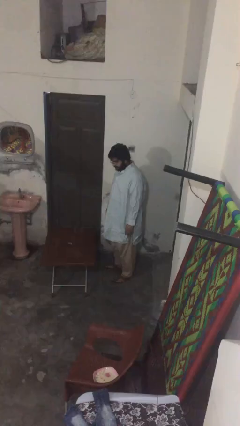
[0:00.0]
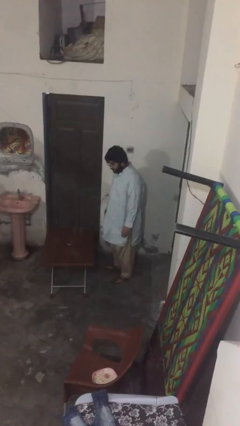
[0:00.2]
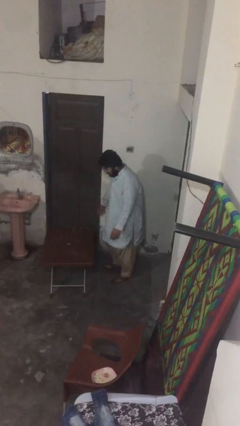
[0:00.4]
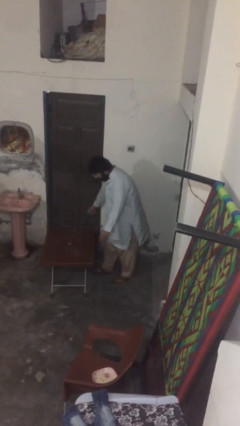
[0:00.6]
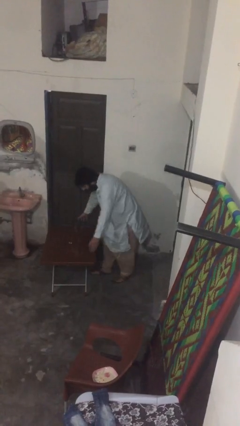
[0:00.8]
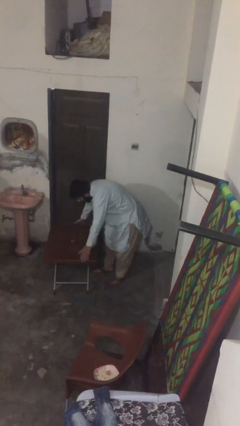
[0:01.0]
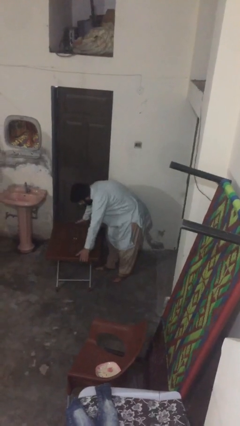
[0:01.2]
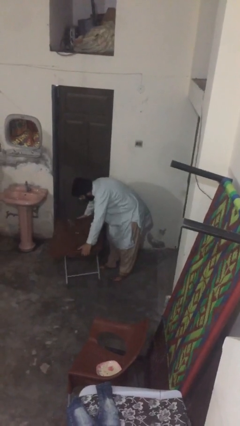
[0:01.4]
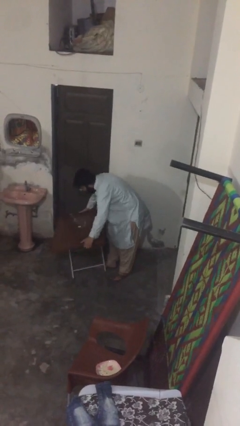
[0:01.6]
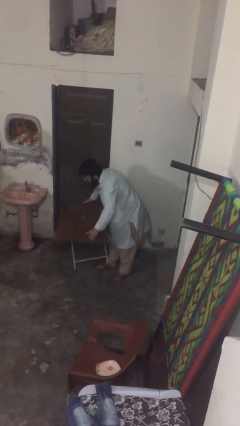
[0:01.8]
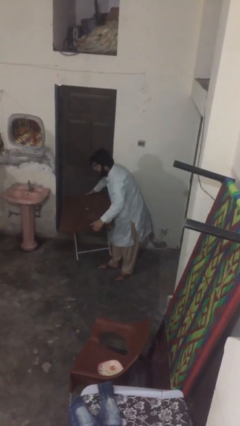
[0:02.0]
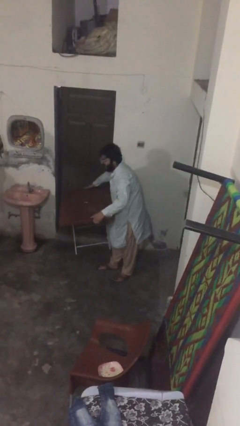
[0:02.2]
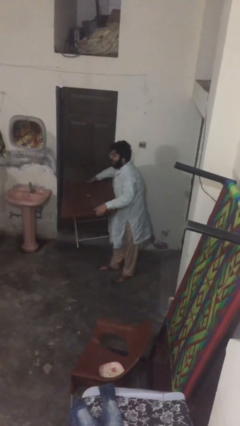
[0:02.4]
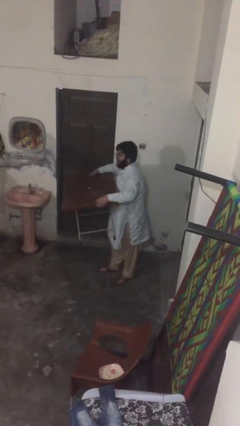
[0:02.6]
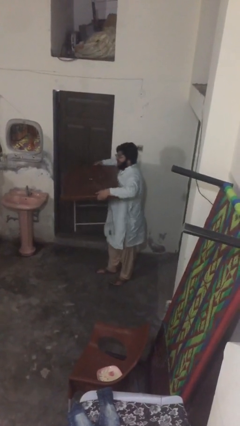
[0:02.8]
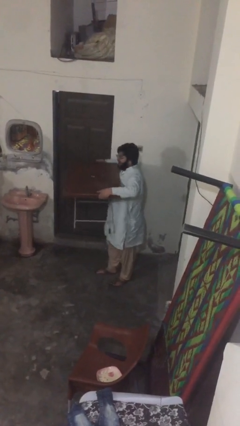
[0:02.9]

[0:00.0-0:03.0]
person picks up object from floor

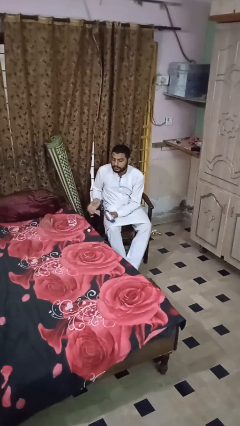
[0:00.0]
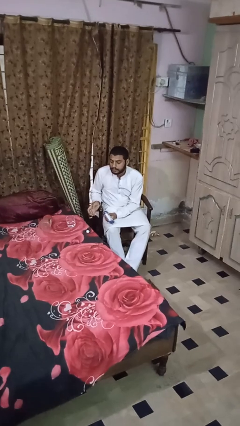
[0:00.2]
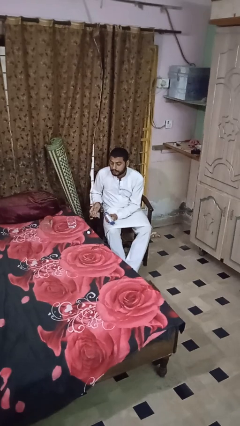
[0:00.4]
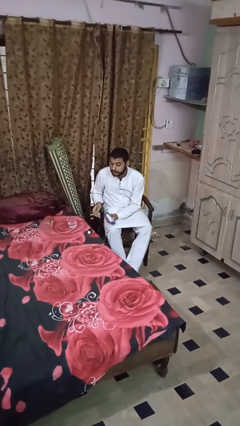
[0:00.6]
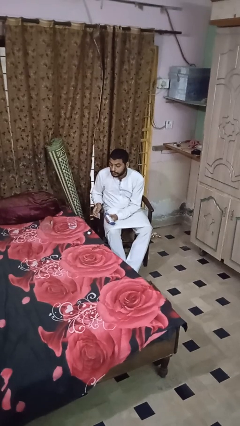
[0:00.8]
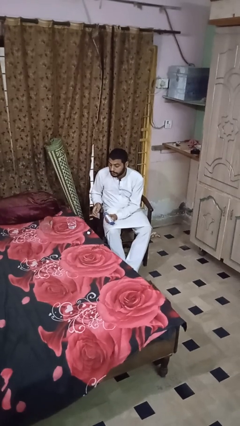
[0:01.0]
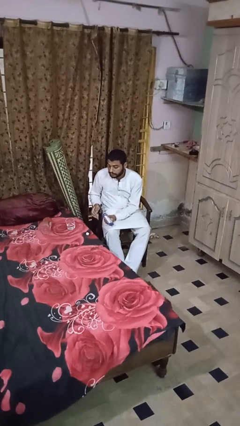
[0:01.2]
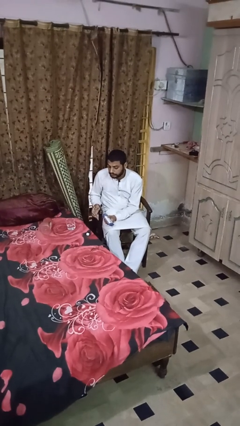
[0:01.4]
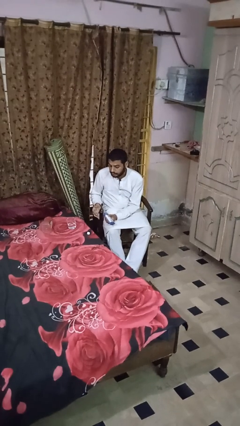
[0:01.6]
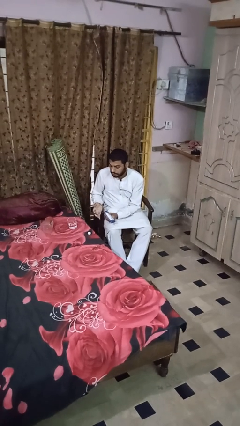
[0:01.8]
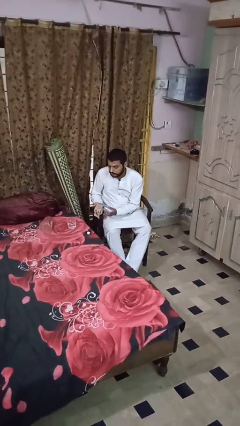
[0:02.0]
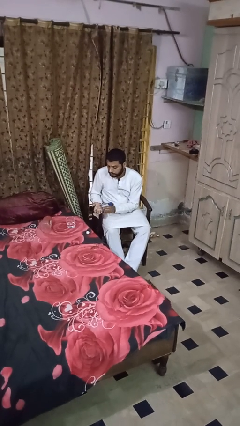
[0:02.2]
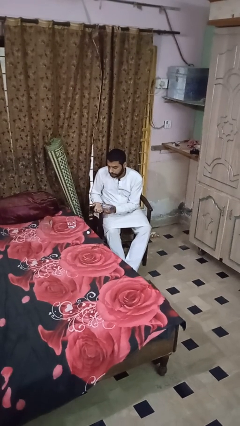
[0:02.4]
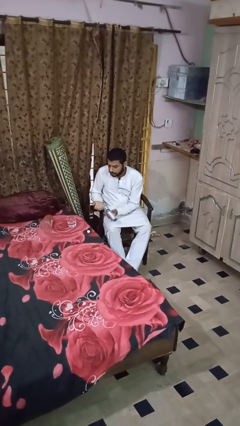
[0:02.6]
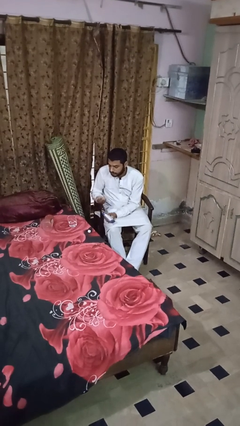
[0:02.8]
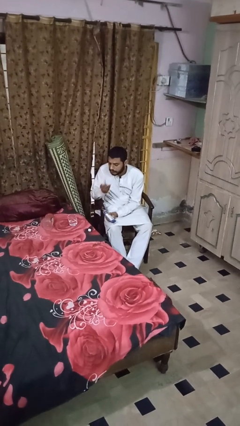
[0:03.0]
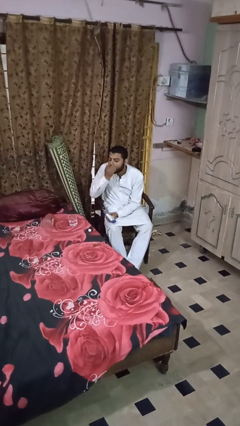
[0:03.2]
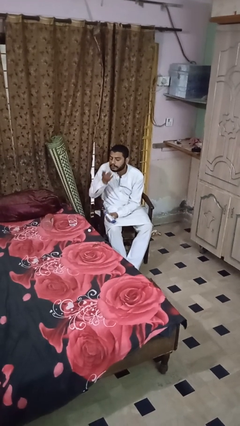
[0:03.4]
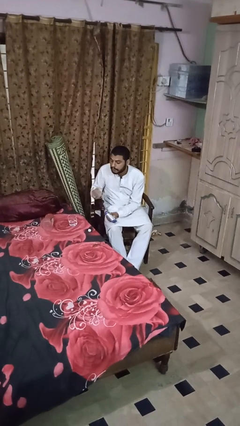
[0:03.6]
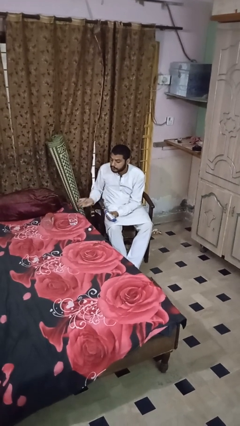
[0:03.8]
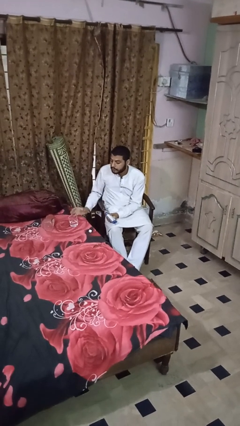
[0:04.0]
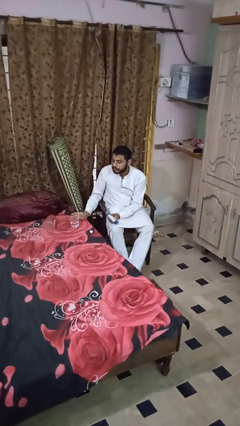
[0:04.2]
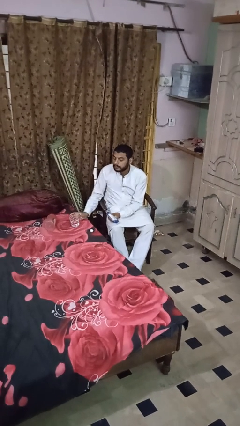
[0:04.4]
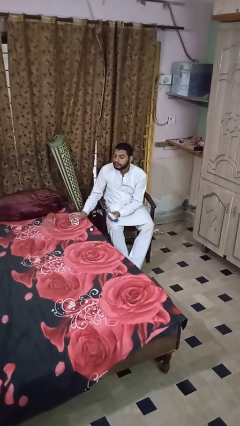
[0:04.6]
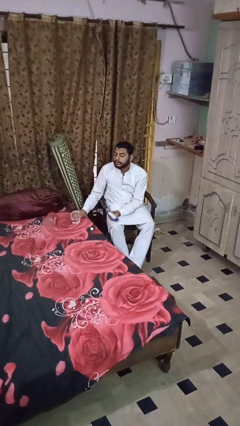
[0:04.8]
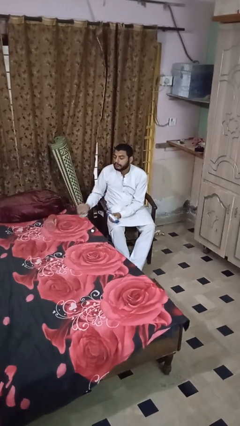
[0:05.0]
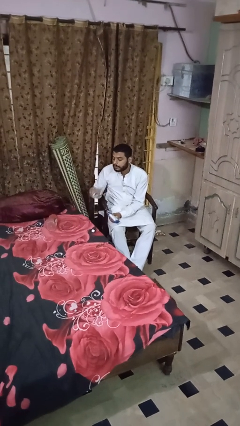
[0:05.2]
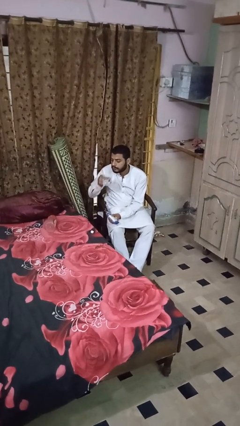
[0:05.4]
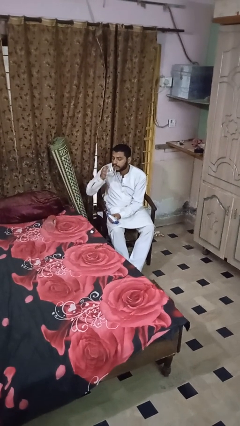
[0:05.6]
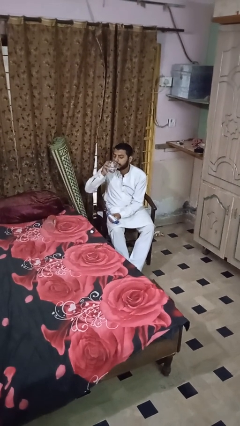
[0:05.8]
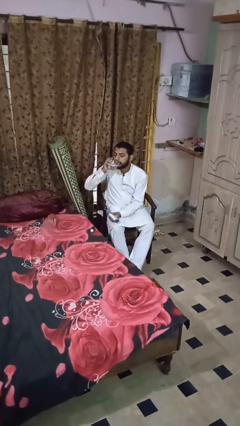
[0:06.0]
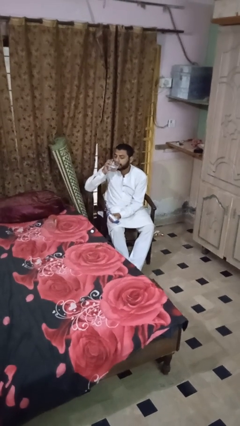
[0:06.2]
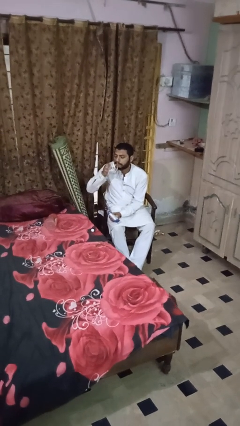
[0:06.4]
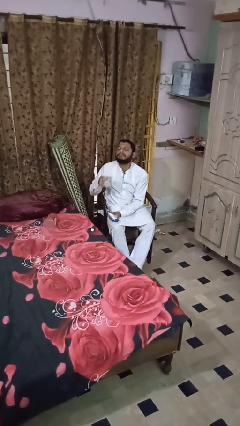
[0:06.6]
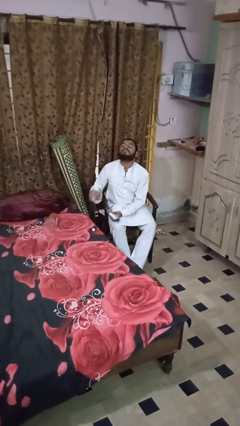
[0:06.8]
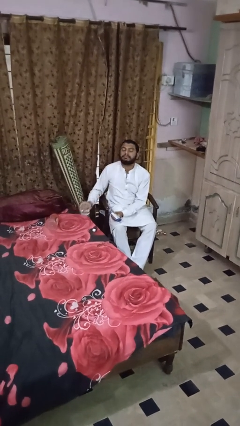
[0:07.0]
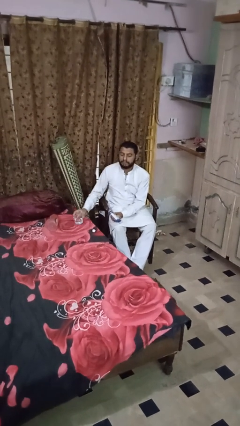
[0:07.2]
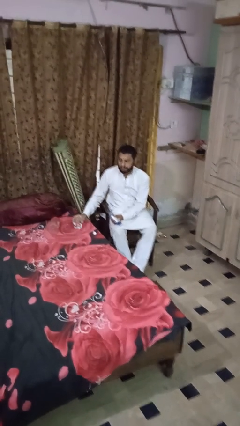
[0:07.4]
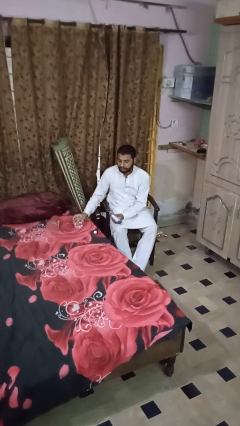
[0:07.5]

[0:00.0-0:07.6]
person takes medicine pills

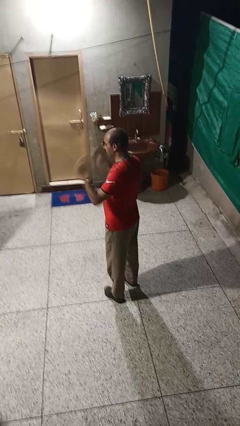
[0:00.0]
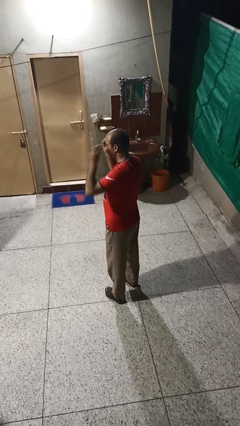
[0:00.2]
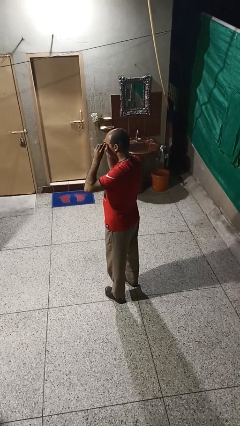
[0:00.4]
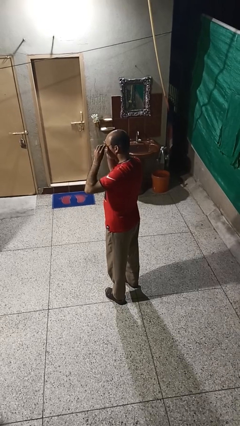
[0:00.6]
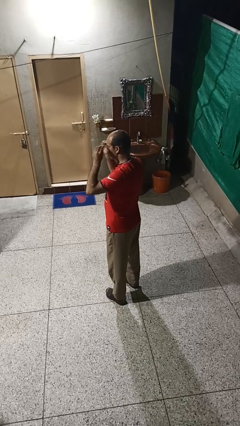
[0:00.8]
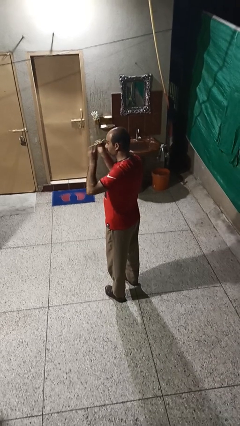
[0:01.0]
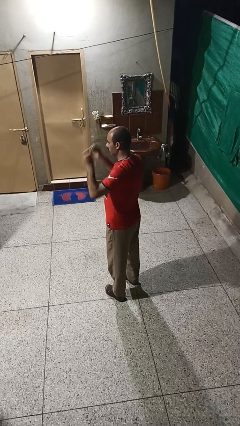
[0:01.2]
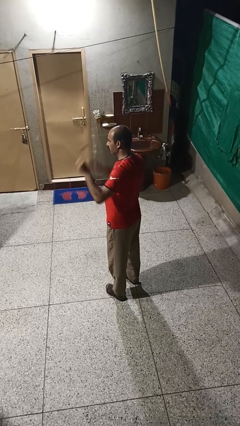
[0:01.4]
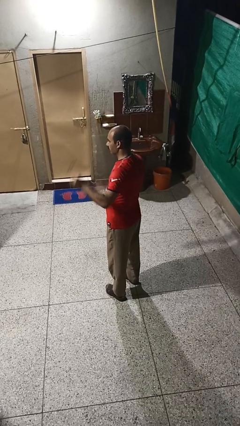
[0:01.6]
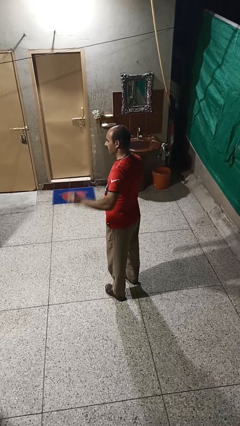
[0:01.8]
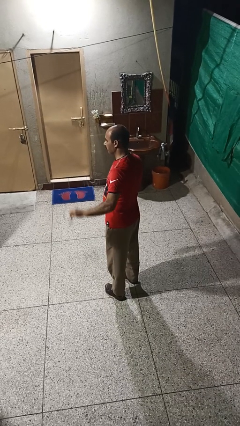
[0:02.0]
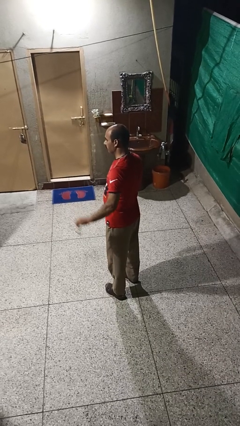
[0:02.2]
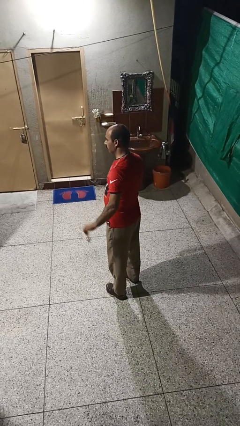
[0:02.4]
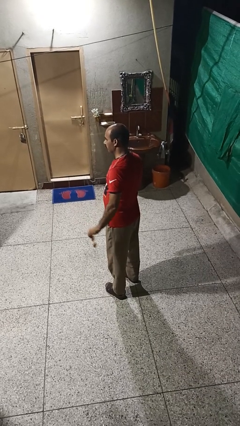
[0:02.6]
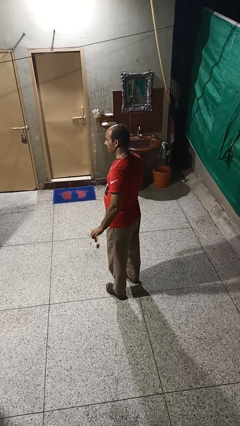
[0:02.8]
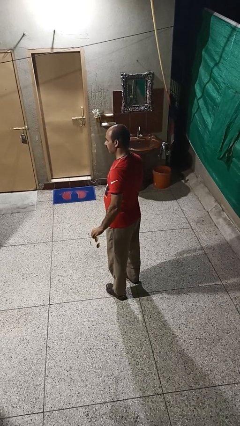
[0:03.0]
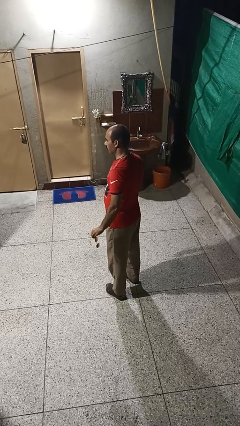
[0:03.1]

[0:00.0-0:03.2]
person takes off sunglasses

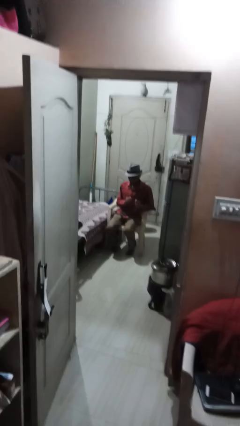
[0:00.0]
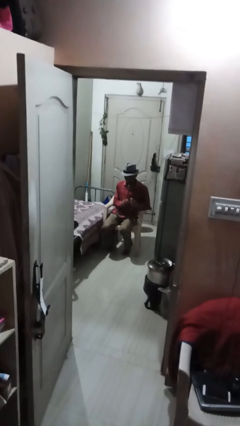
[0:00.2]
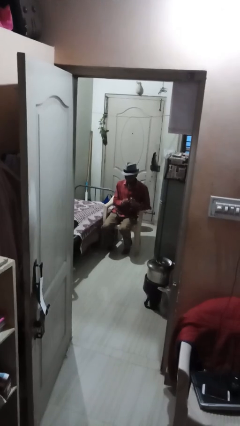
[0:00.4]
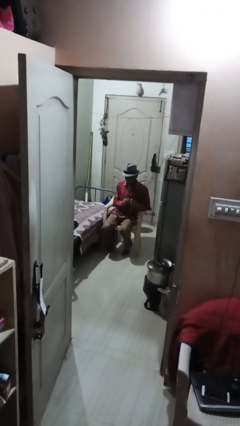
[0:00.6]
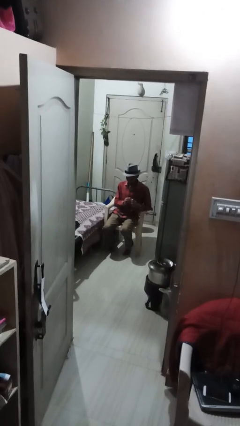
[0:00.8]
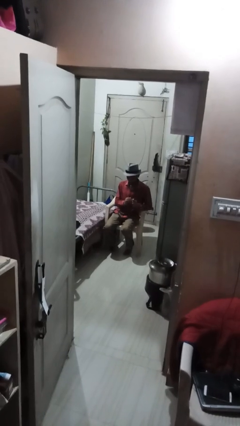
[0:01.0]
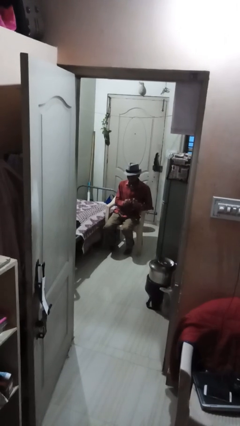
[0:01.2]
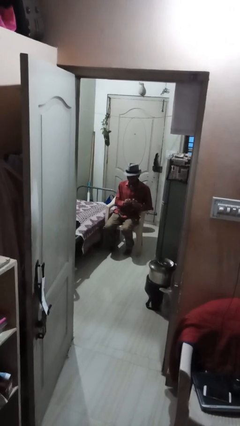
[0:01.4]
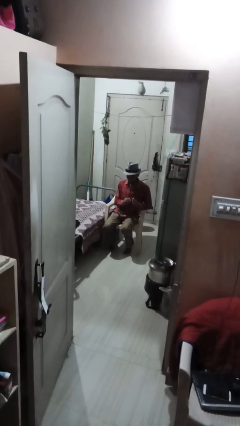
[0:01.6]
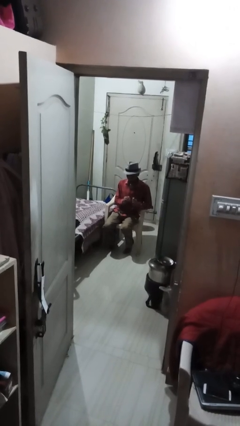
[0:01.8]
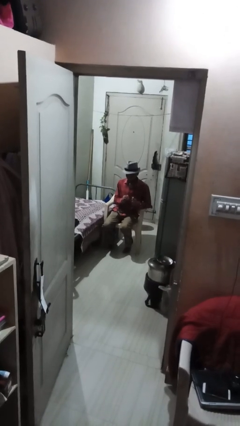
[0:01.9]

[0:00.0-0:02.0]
person files fingernails

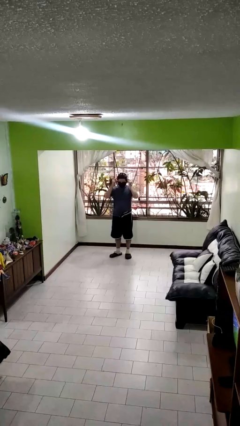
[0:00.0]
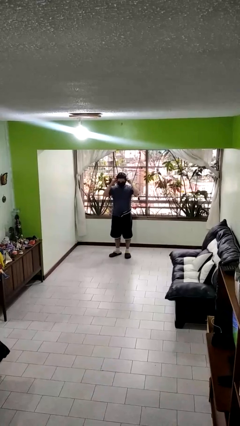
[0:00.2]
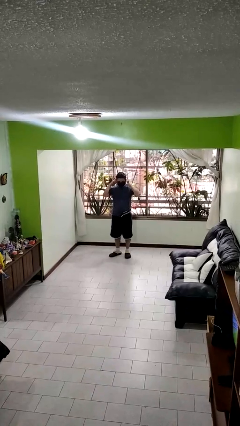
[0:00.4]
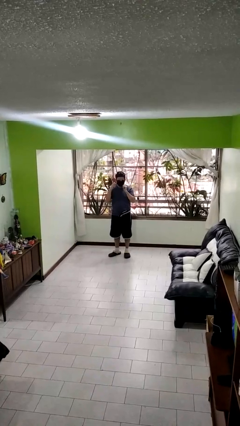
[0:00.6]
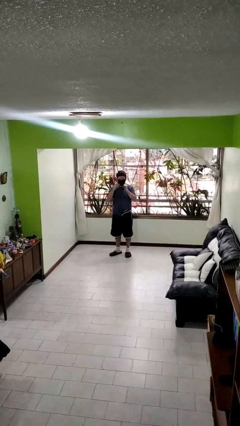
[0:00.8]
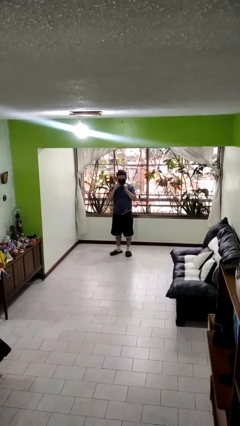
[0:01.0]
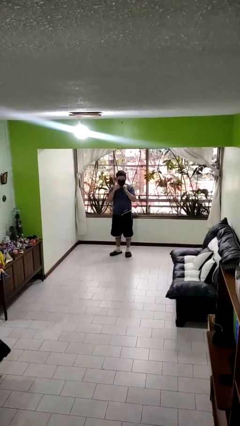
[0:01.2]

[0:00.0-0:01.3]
person puts on facemask

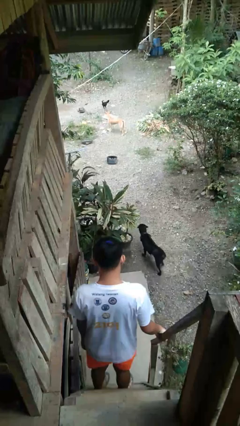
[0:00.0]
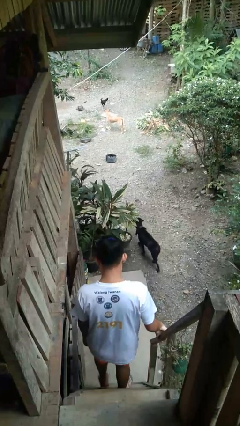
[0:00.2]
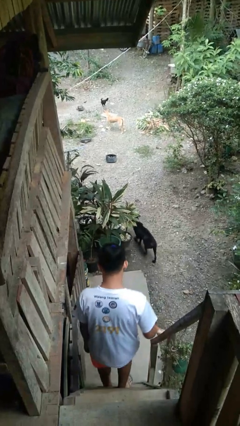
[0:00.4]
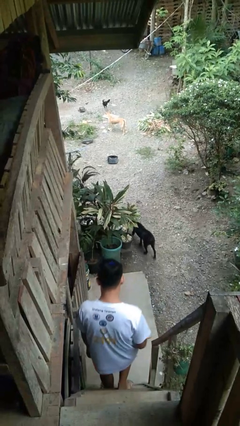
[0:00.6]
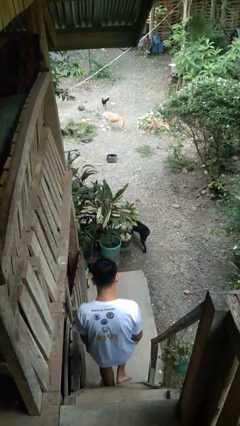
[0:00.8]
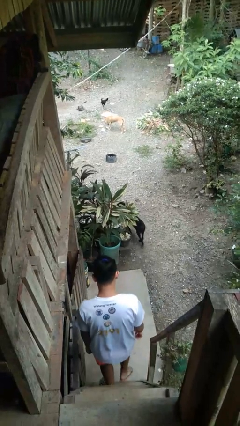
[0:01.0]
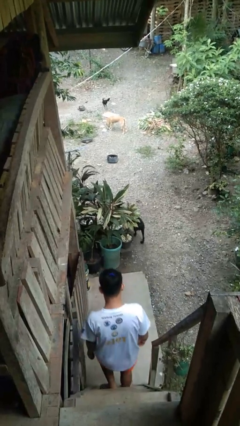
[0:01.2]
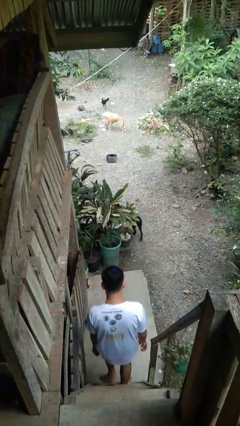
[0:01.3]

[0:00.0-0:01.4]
person climbs down stairs
